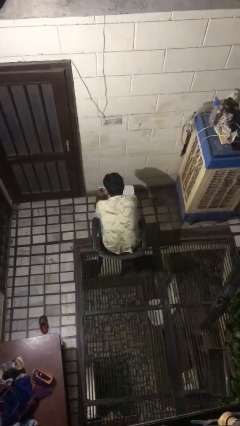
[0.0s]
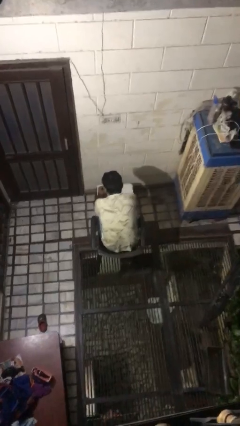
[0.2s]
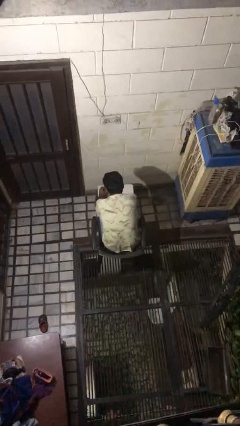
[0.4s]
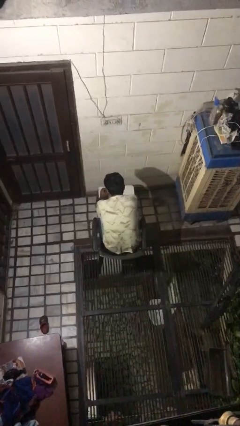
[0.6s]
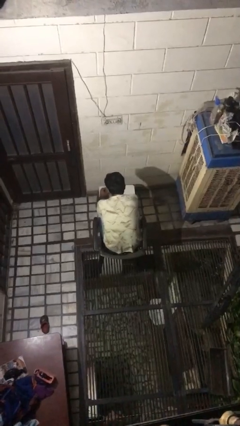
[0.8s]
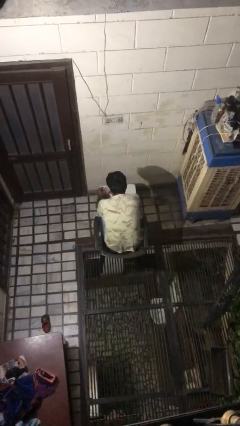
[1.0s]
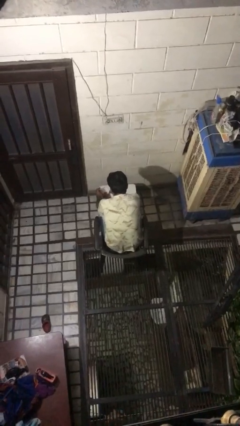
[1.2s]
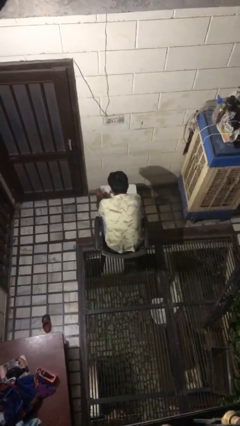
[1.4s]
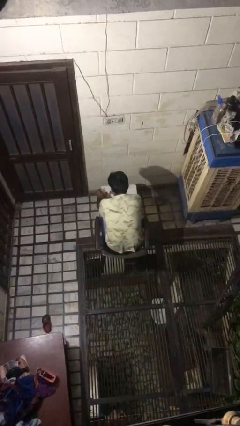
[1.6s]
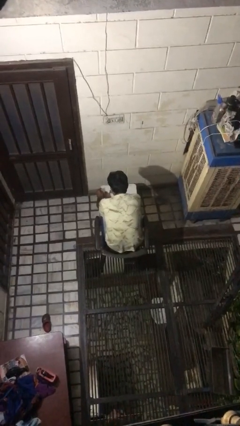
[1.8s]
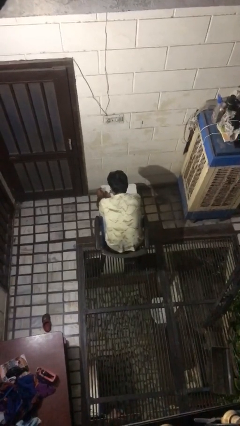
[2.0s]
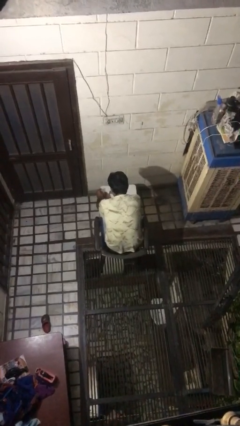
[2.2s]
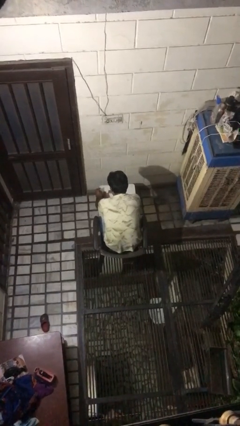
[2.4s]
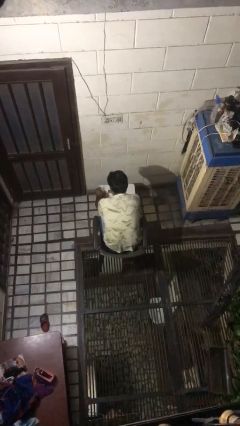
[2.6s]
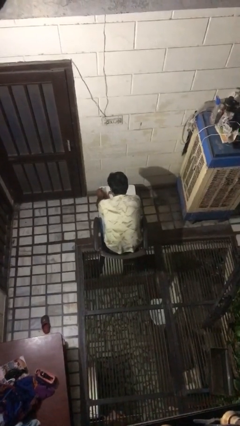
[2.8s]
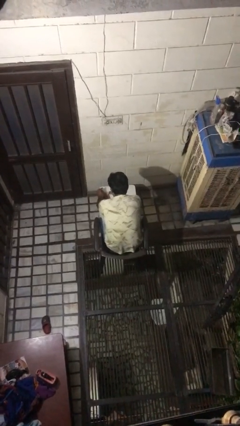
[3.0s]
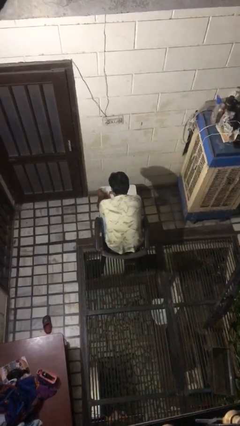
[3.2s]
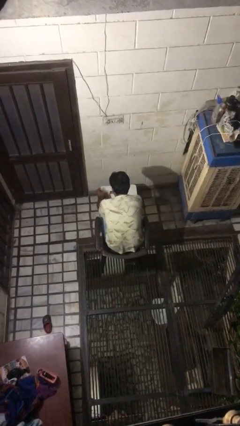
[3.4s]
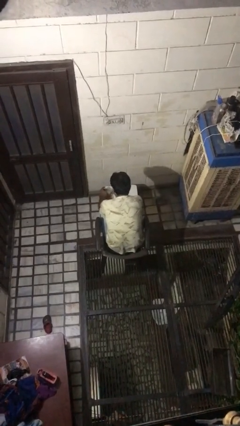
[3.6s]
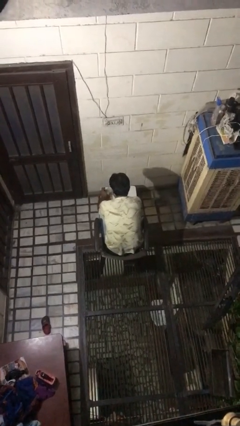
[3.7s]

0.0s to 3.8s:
person paints fingernails

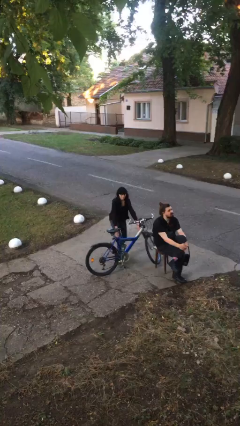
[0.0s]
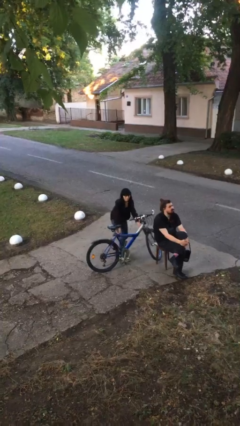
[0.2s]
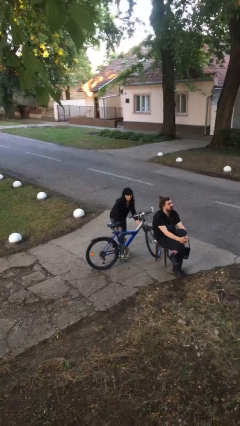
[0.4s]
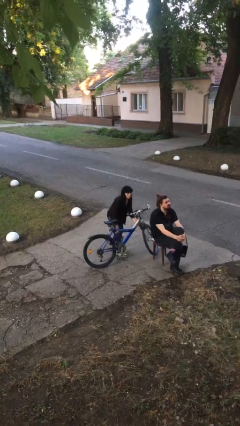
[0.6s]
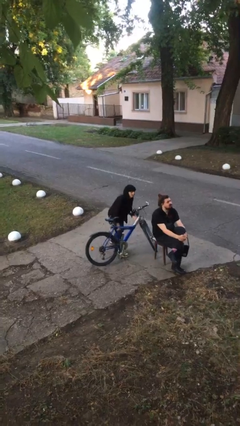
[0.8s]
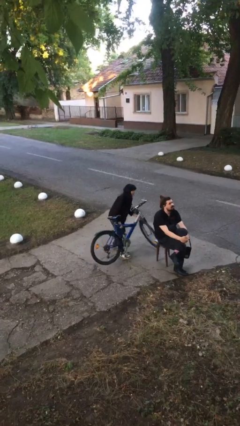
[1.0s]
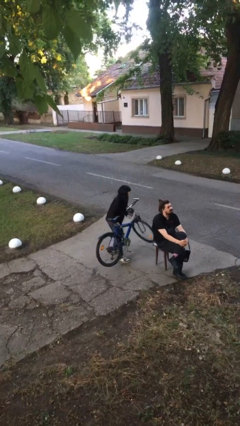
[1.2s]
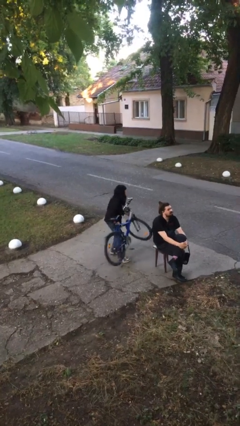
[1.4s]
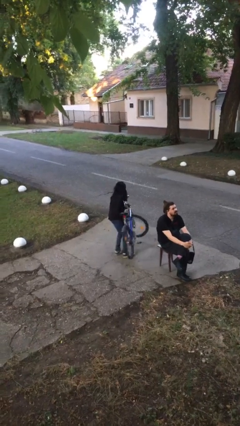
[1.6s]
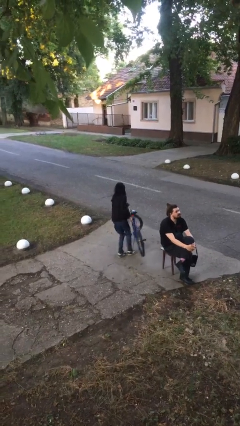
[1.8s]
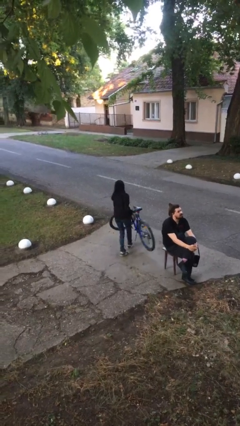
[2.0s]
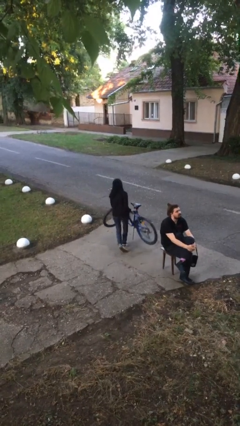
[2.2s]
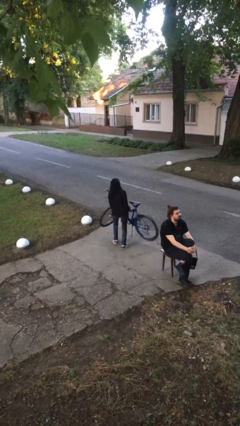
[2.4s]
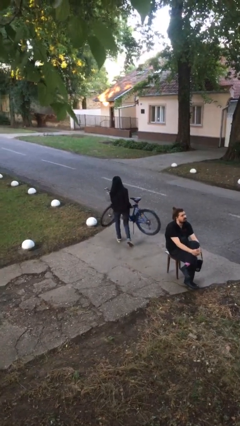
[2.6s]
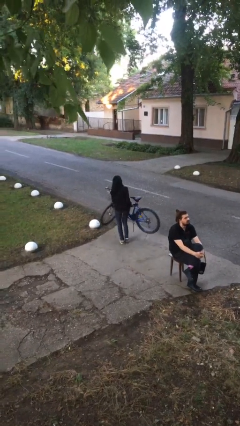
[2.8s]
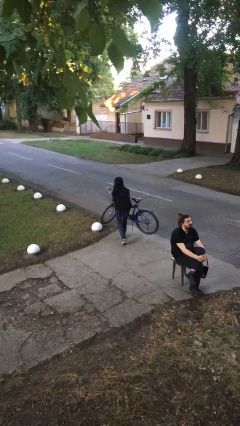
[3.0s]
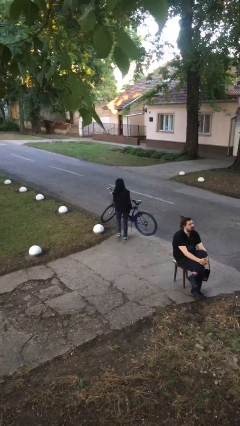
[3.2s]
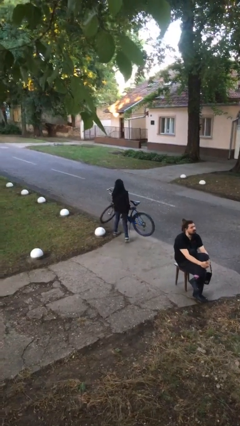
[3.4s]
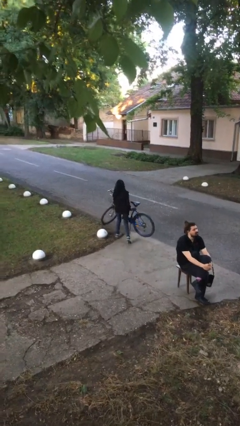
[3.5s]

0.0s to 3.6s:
person steals object from person

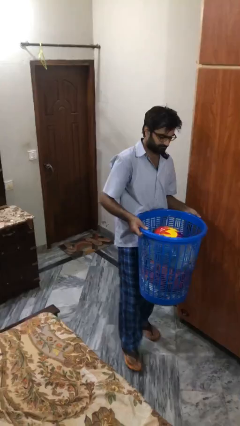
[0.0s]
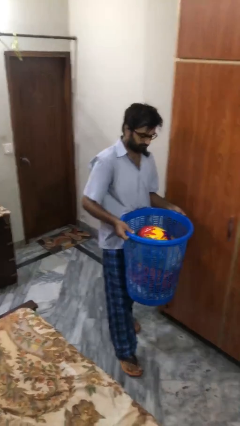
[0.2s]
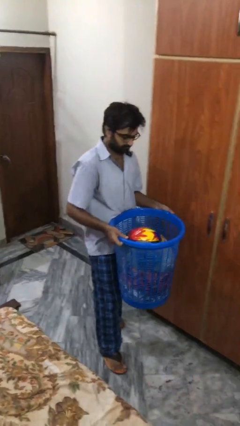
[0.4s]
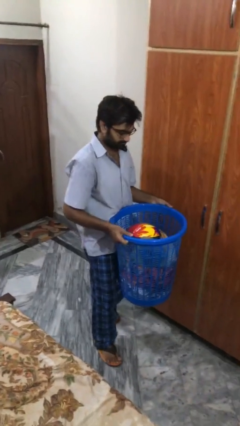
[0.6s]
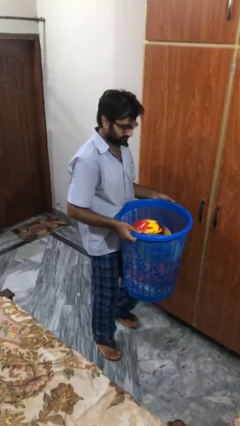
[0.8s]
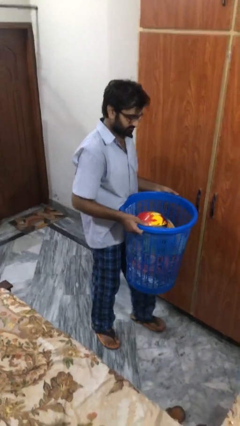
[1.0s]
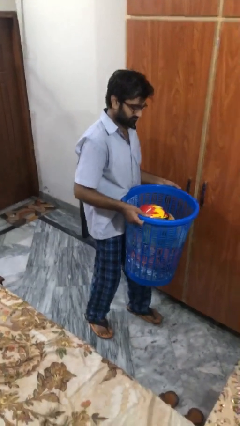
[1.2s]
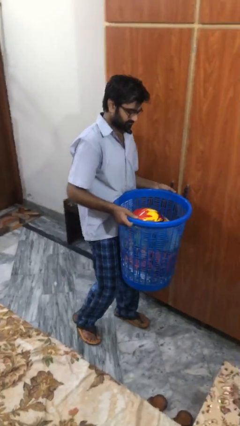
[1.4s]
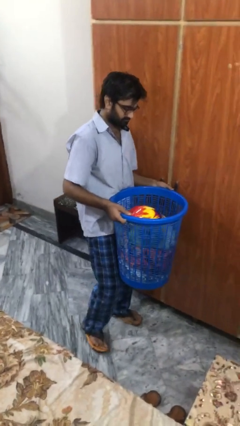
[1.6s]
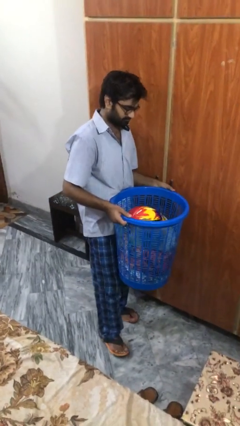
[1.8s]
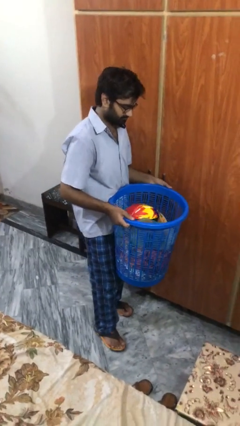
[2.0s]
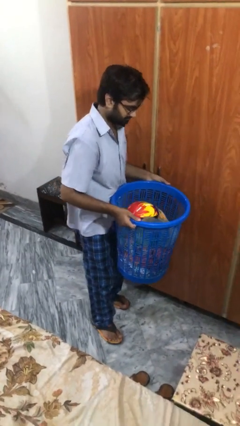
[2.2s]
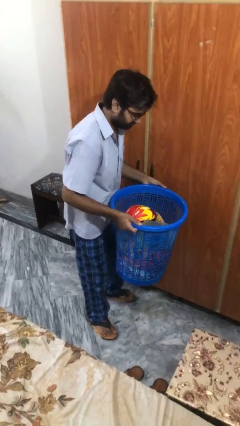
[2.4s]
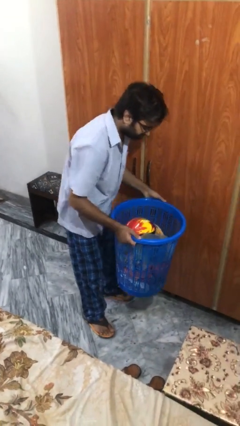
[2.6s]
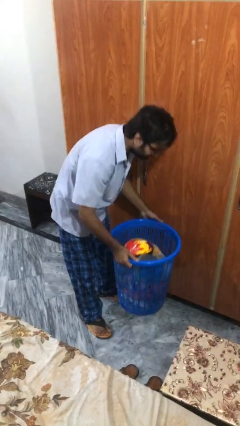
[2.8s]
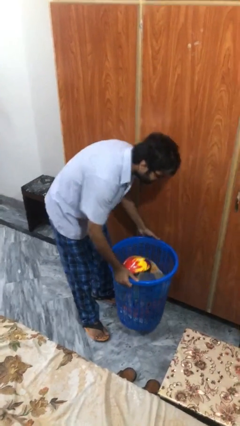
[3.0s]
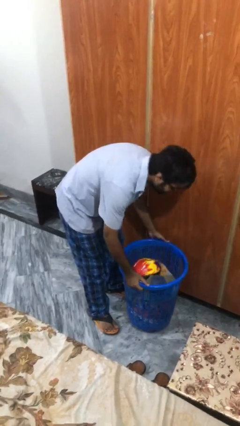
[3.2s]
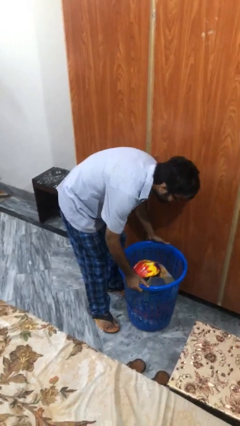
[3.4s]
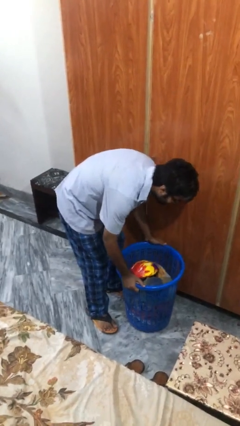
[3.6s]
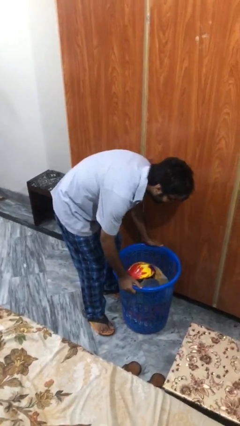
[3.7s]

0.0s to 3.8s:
person puts down object on floor

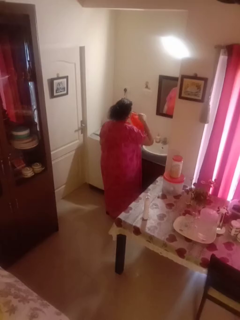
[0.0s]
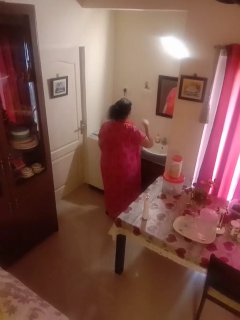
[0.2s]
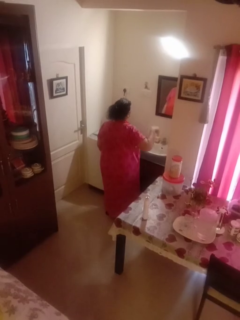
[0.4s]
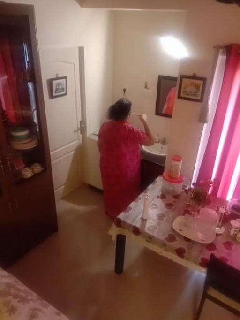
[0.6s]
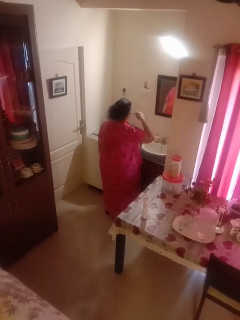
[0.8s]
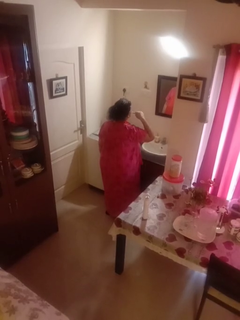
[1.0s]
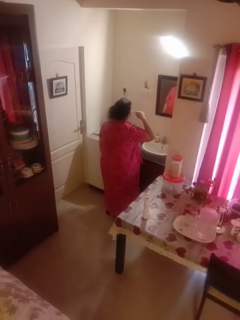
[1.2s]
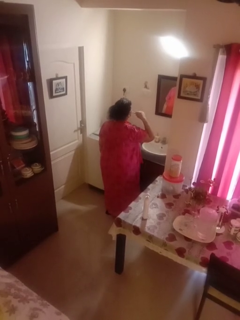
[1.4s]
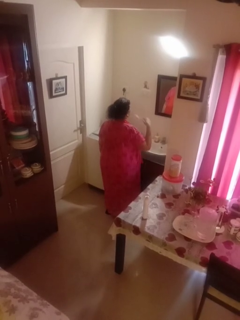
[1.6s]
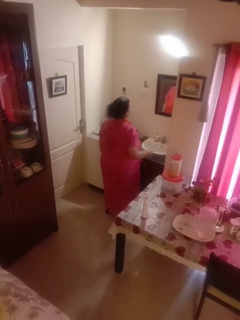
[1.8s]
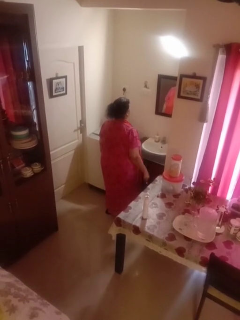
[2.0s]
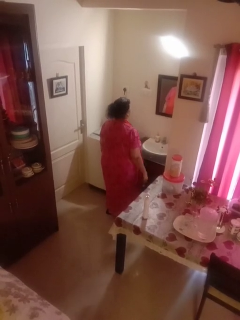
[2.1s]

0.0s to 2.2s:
person brushes teeth

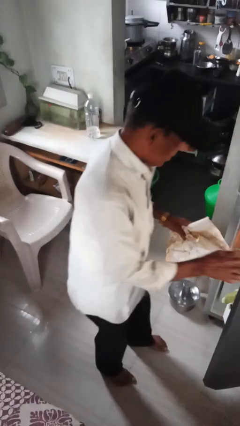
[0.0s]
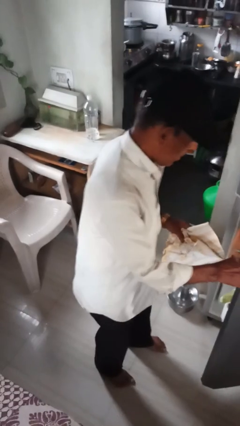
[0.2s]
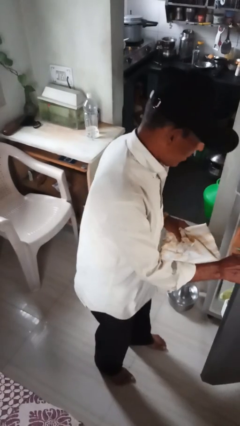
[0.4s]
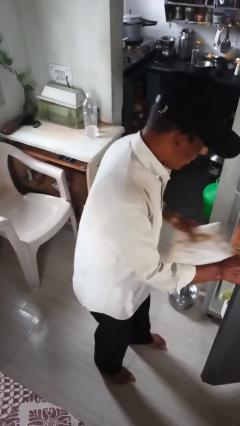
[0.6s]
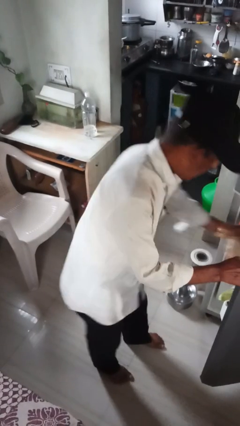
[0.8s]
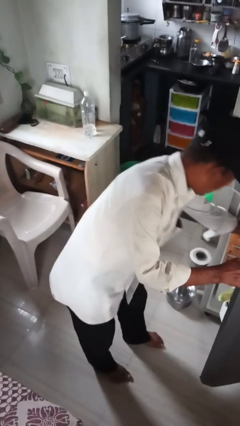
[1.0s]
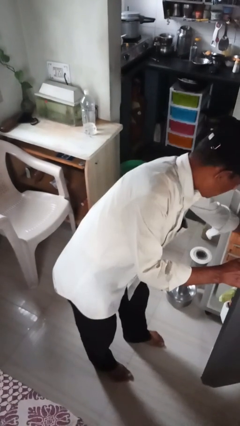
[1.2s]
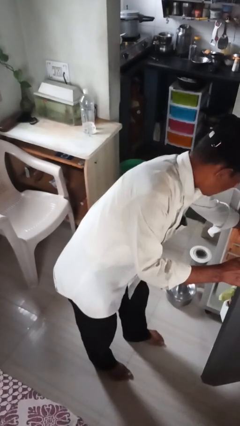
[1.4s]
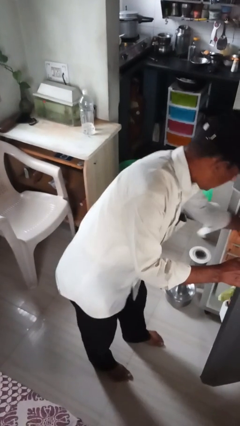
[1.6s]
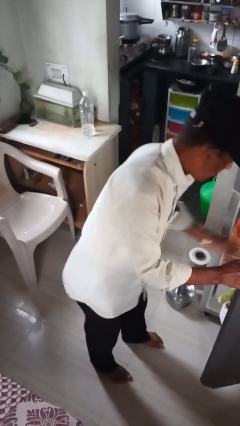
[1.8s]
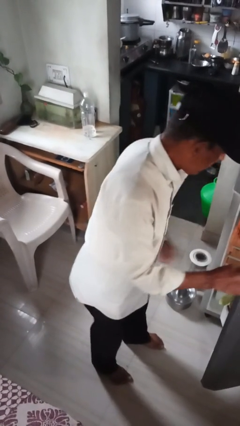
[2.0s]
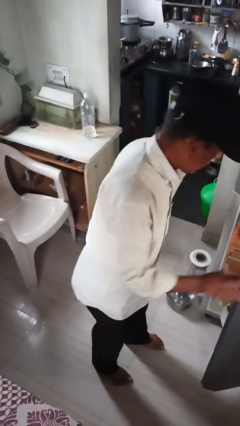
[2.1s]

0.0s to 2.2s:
person loads clotheswasher

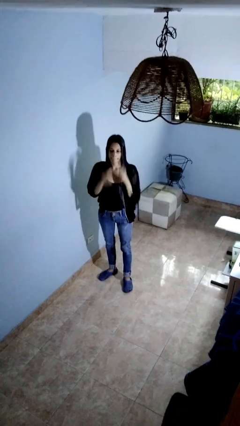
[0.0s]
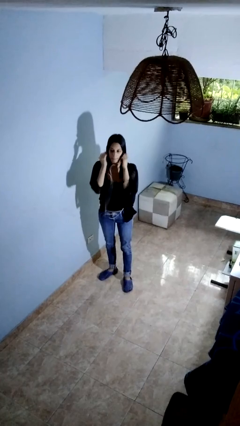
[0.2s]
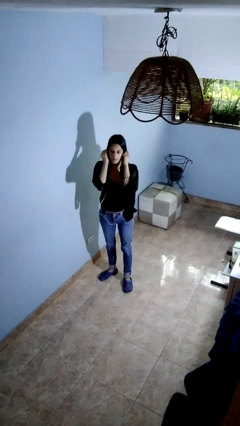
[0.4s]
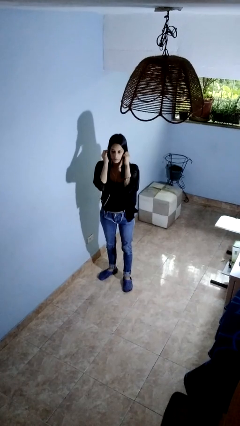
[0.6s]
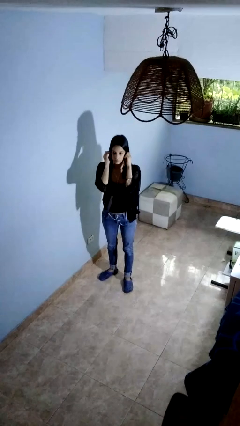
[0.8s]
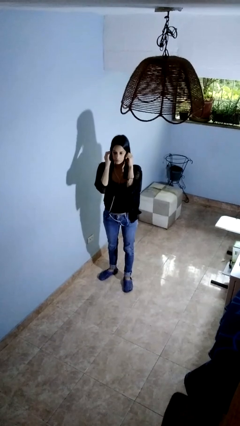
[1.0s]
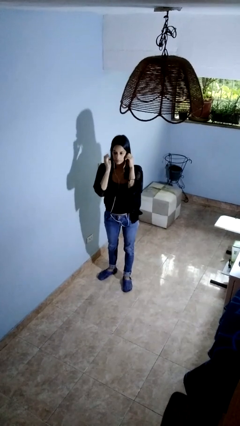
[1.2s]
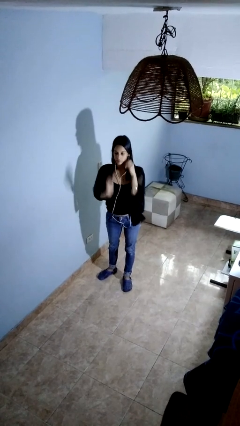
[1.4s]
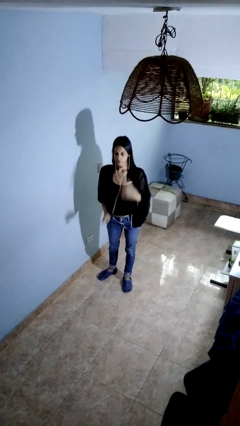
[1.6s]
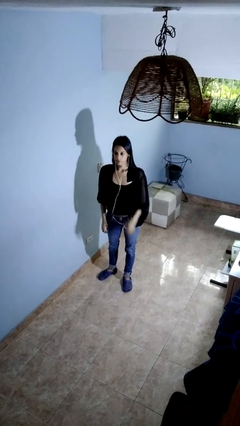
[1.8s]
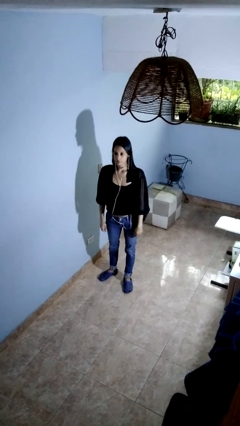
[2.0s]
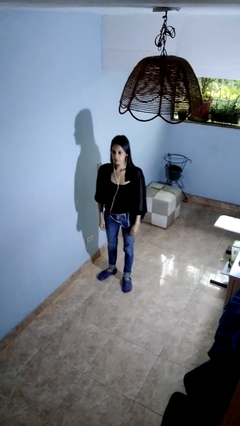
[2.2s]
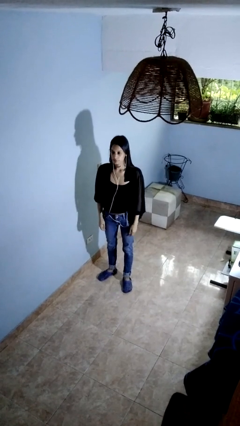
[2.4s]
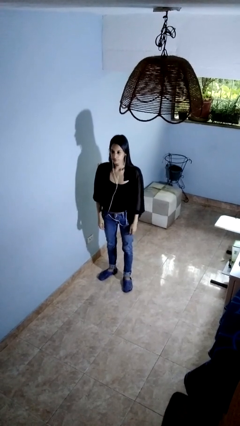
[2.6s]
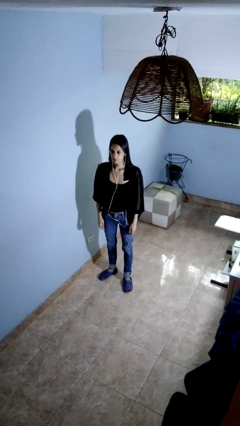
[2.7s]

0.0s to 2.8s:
person puts on headphones
